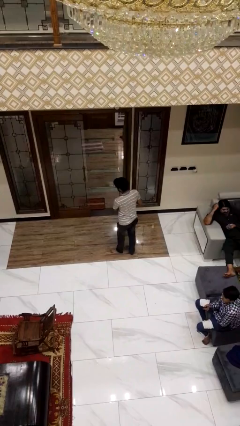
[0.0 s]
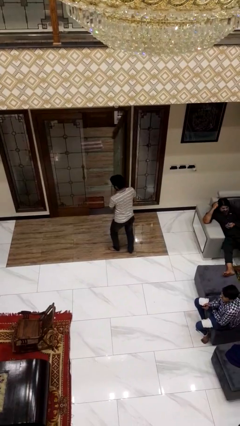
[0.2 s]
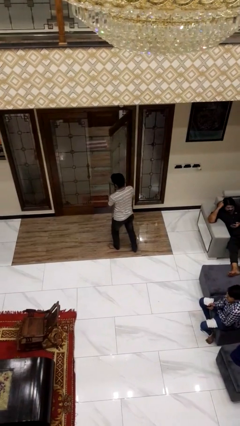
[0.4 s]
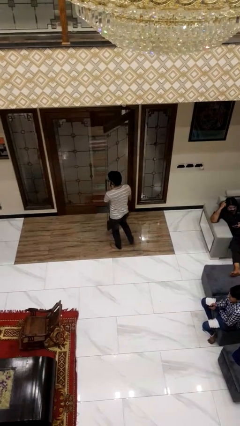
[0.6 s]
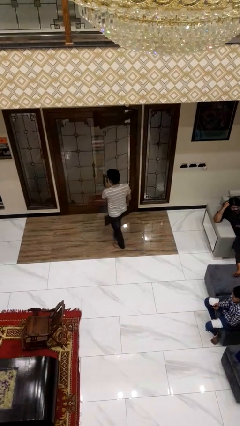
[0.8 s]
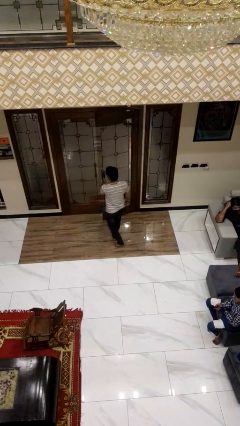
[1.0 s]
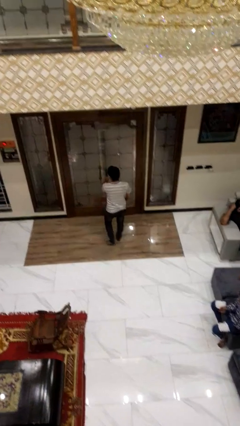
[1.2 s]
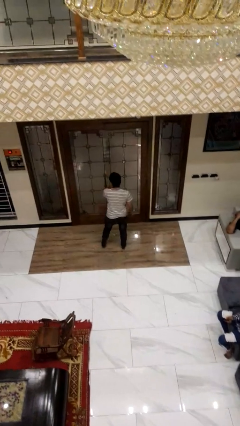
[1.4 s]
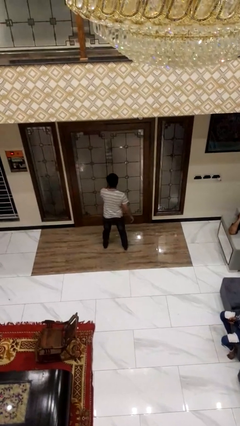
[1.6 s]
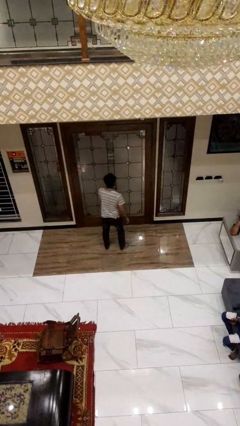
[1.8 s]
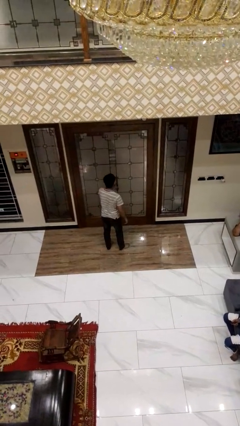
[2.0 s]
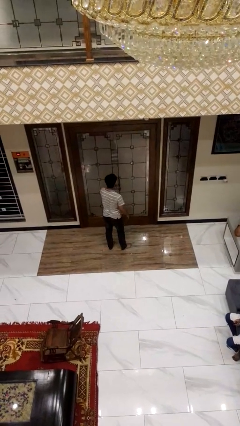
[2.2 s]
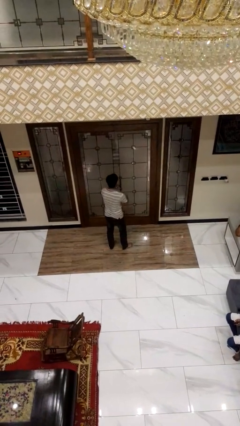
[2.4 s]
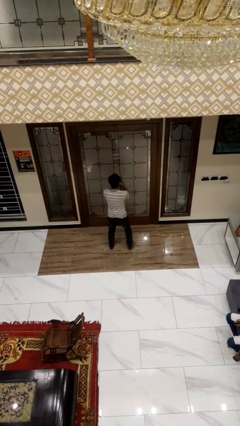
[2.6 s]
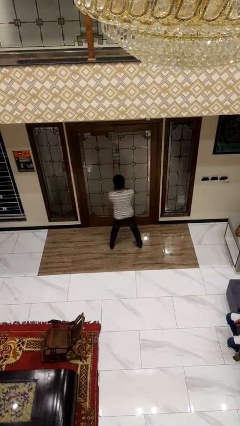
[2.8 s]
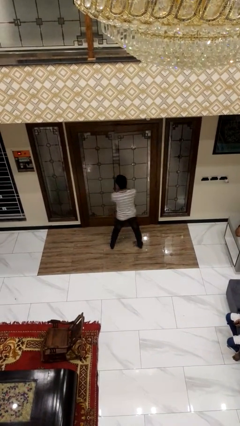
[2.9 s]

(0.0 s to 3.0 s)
person closes facility door

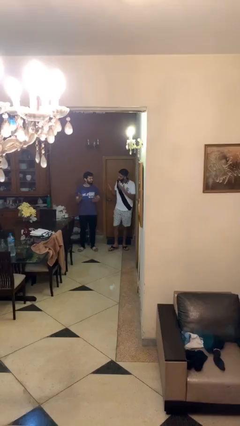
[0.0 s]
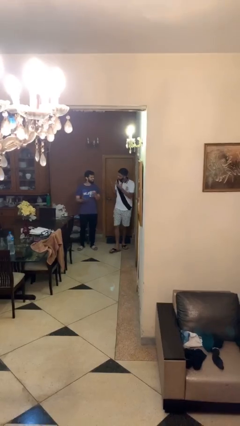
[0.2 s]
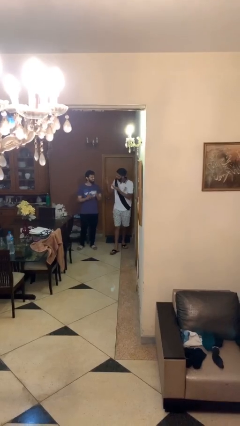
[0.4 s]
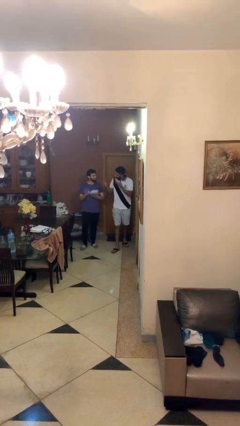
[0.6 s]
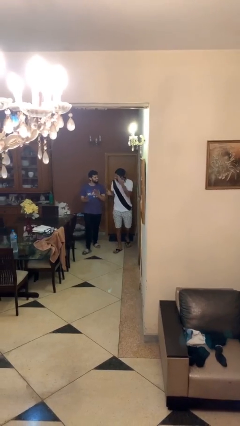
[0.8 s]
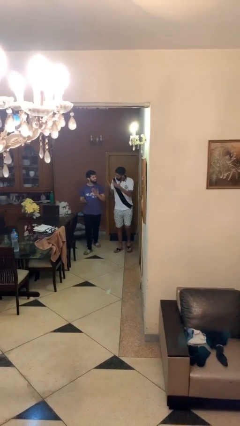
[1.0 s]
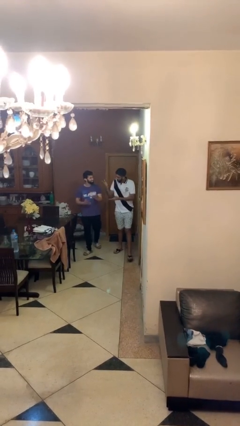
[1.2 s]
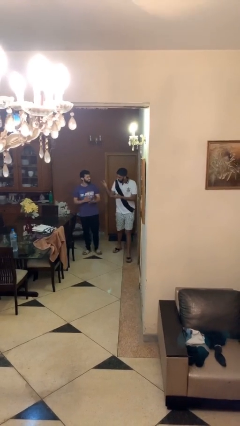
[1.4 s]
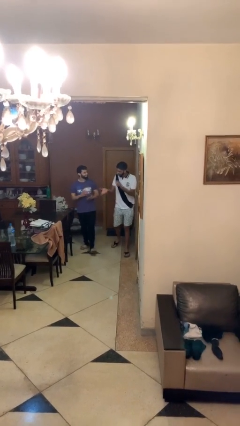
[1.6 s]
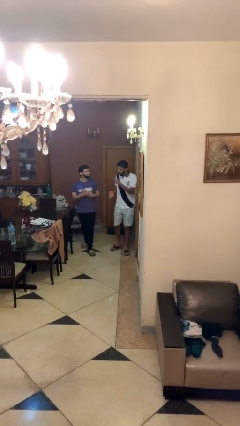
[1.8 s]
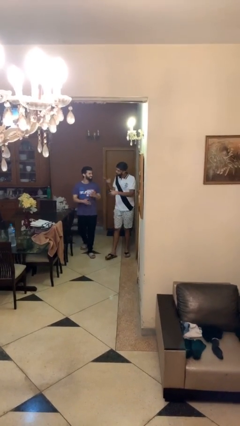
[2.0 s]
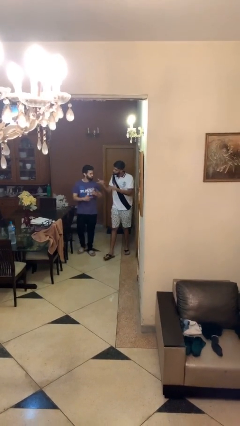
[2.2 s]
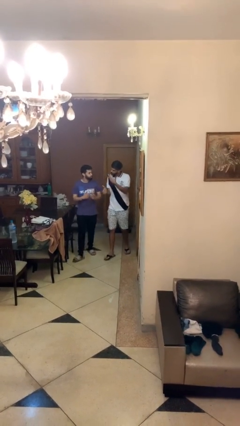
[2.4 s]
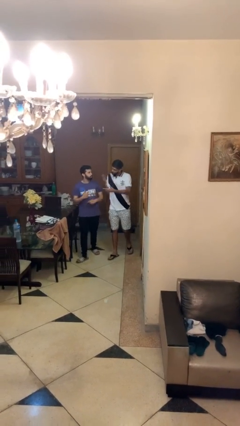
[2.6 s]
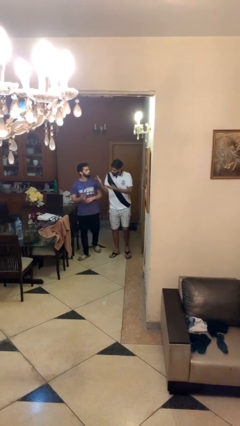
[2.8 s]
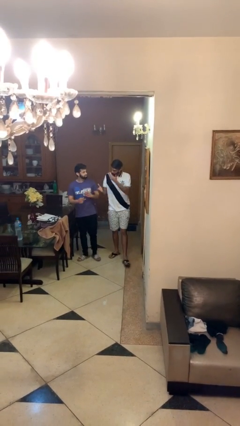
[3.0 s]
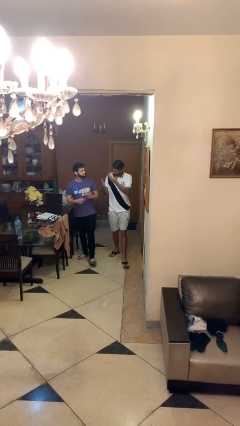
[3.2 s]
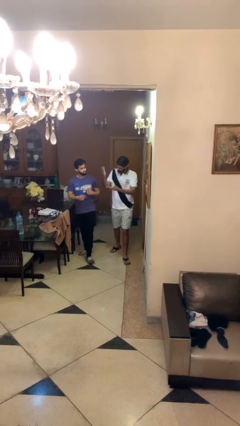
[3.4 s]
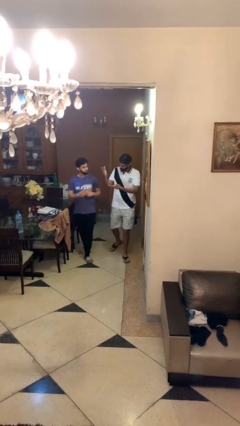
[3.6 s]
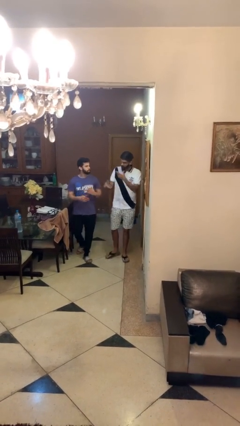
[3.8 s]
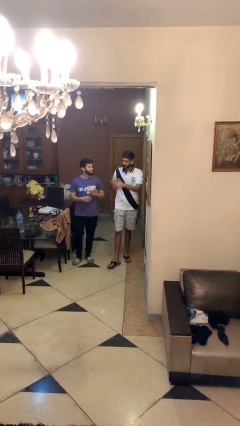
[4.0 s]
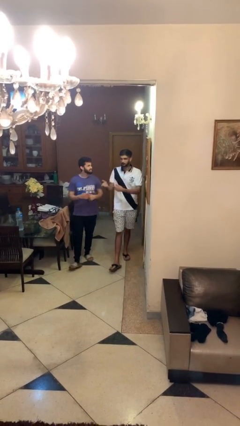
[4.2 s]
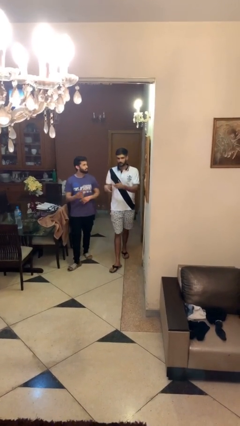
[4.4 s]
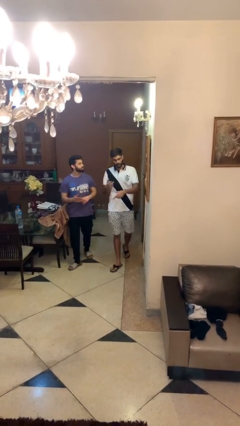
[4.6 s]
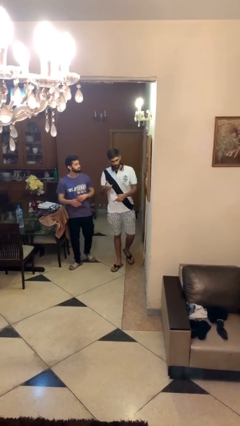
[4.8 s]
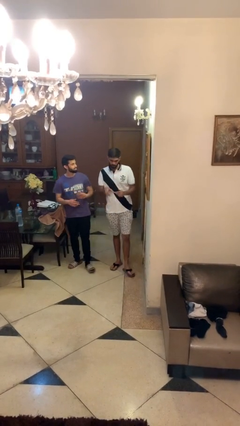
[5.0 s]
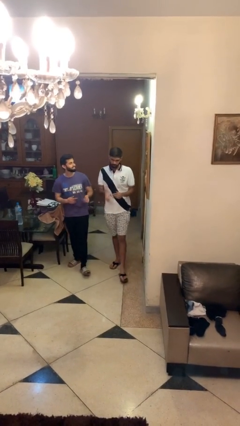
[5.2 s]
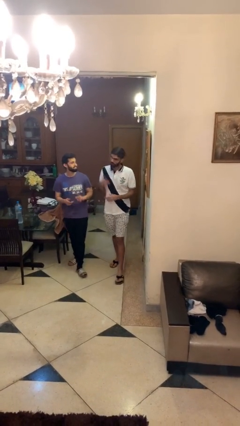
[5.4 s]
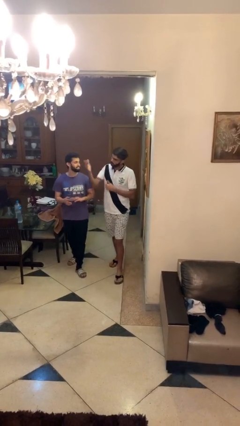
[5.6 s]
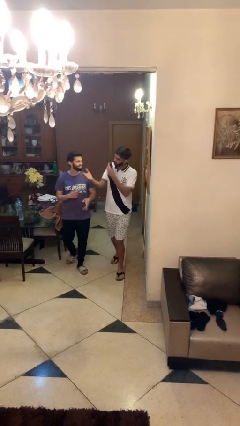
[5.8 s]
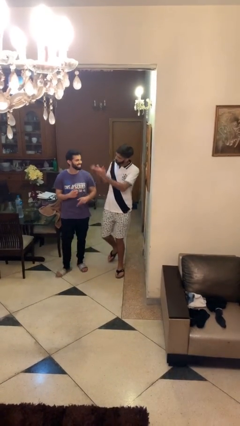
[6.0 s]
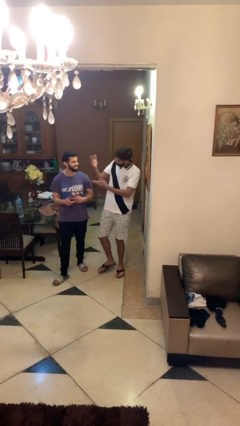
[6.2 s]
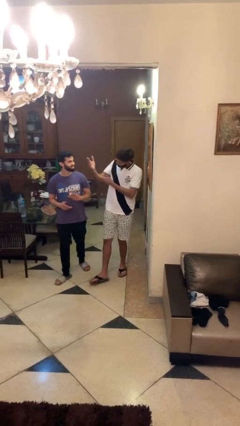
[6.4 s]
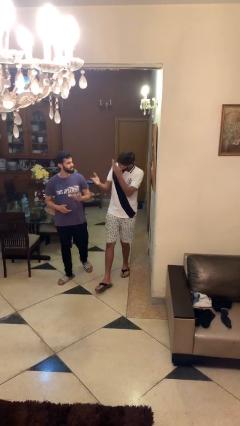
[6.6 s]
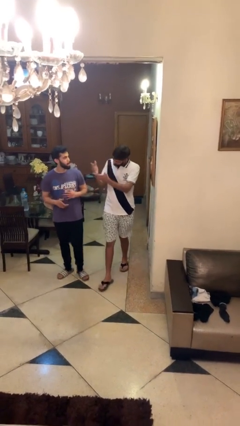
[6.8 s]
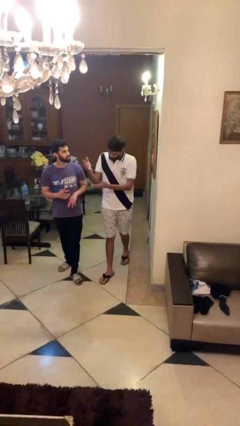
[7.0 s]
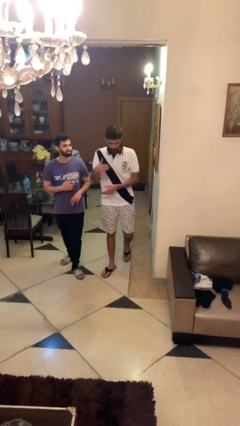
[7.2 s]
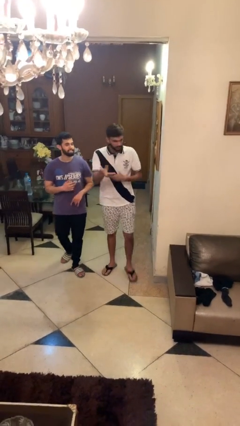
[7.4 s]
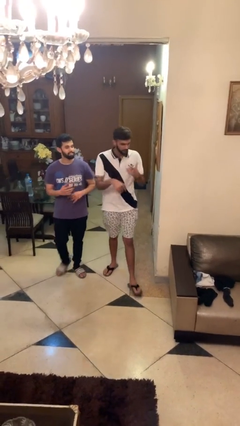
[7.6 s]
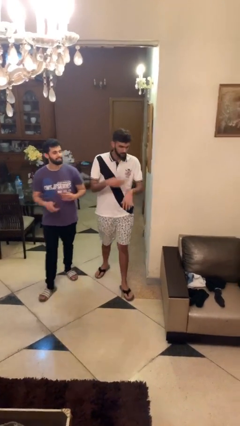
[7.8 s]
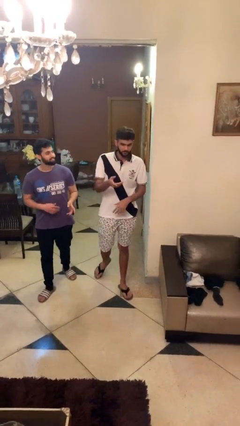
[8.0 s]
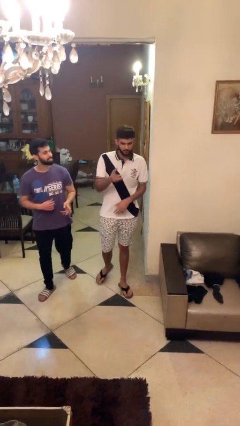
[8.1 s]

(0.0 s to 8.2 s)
person talks to person

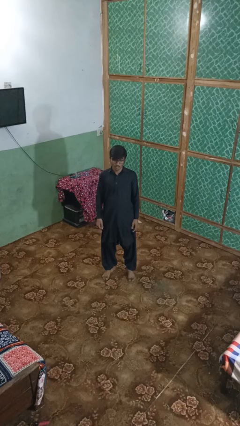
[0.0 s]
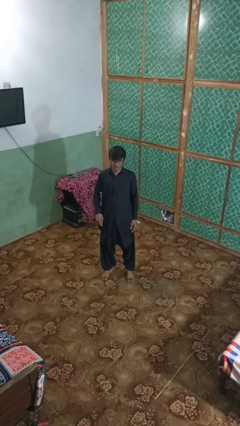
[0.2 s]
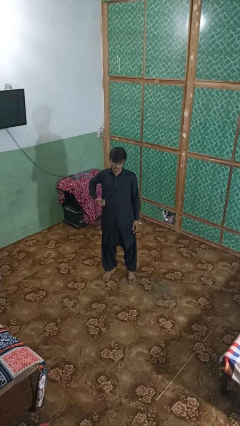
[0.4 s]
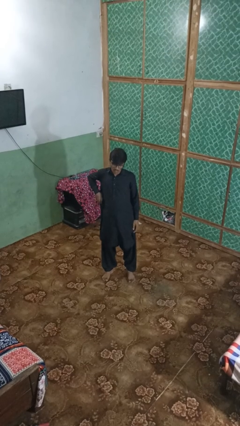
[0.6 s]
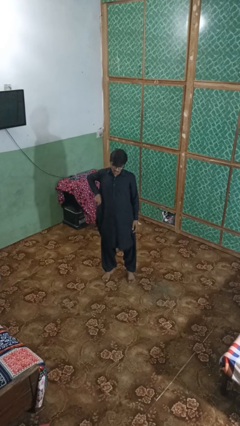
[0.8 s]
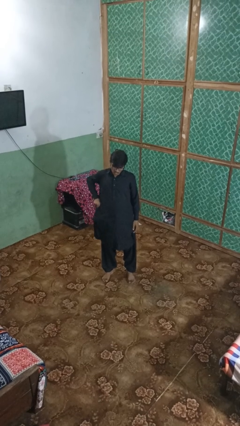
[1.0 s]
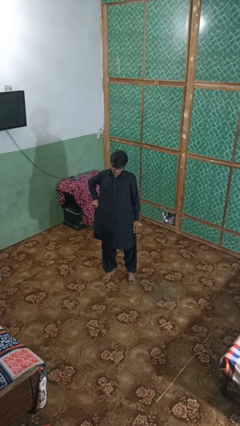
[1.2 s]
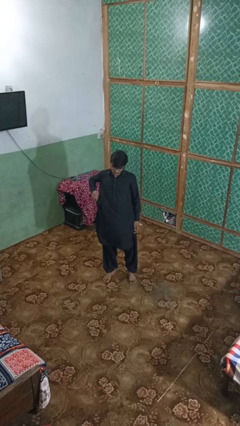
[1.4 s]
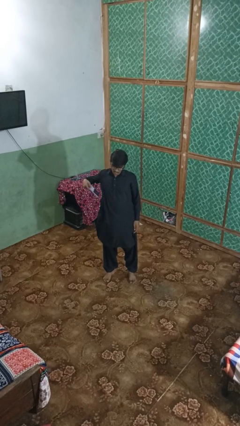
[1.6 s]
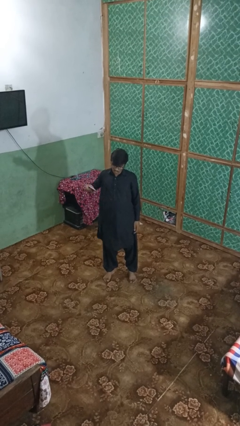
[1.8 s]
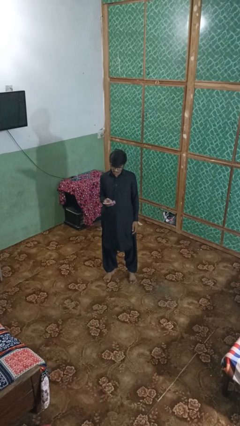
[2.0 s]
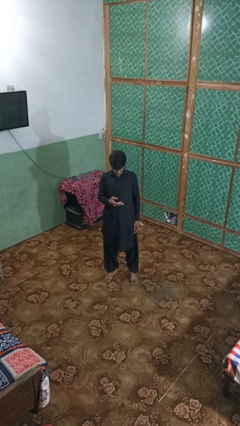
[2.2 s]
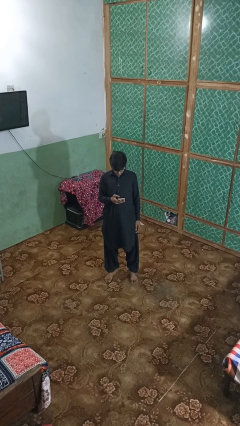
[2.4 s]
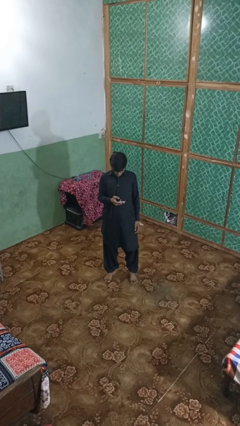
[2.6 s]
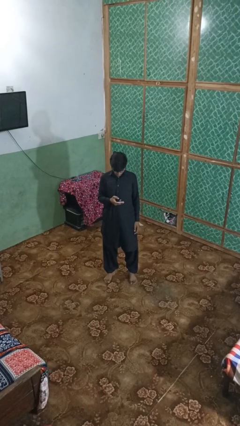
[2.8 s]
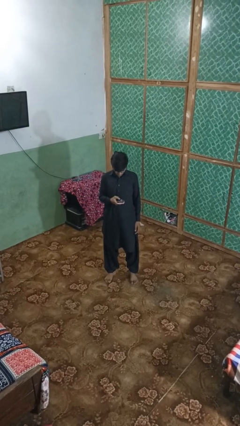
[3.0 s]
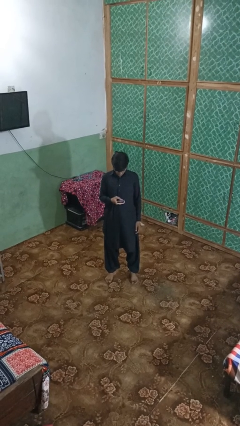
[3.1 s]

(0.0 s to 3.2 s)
person takes phone from pocket

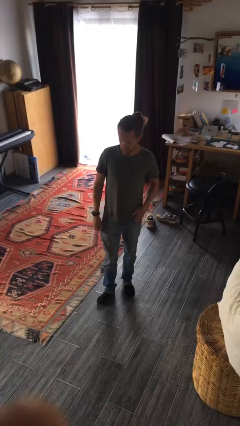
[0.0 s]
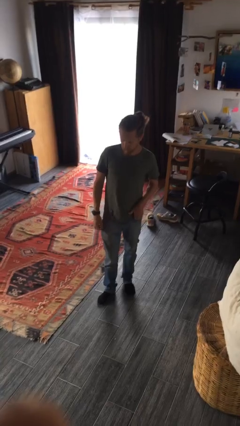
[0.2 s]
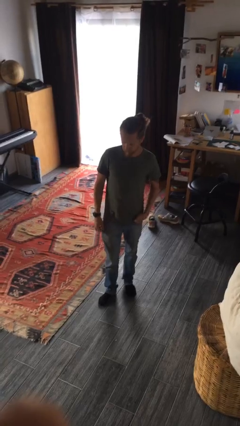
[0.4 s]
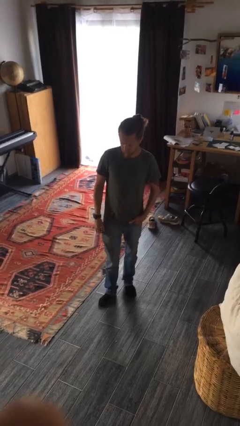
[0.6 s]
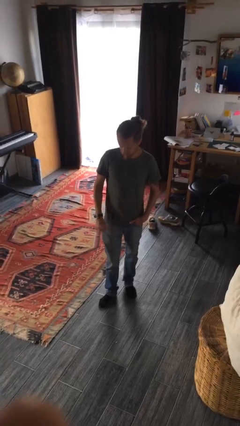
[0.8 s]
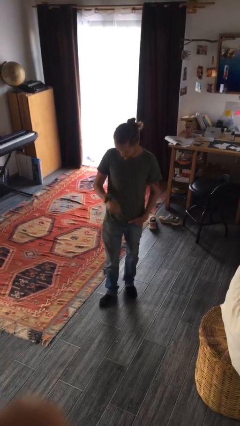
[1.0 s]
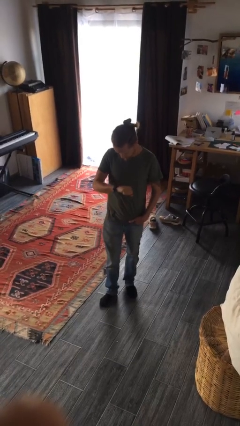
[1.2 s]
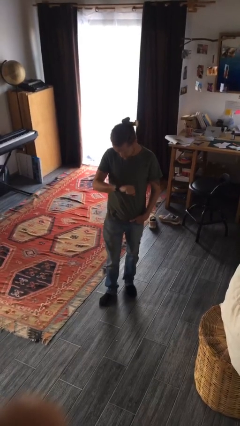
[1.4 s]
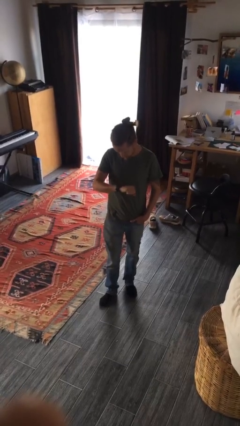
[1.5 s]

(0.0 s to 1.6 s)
person looks at wristwatch

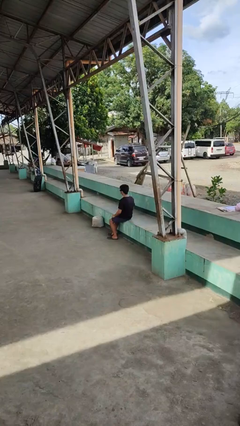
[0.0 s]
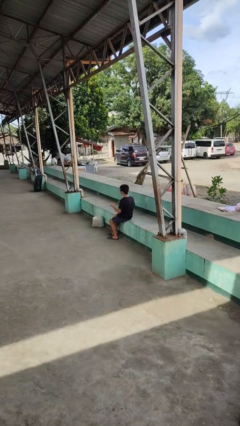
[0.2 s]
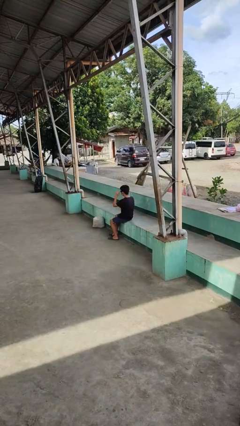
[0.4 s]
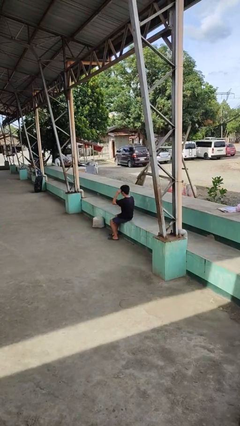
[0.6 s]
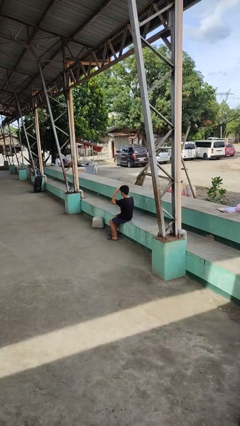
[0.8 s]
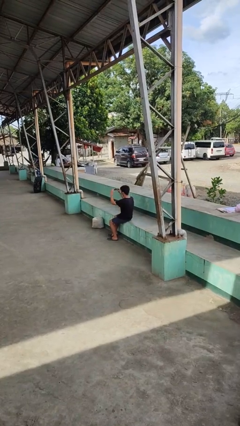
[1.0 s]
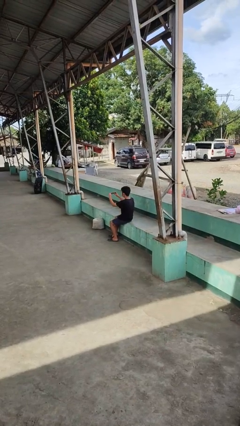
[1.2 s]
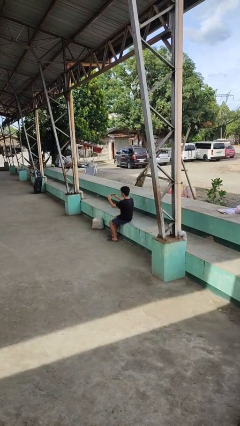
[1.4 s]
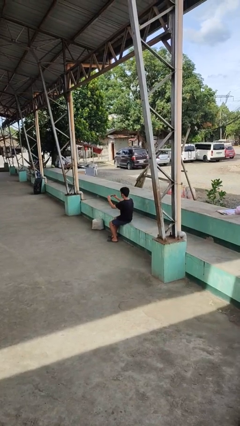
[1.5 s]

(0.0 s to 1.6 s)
person takes off sunglasses

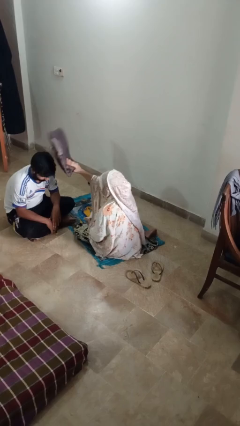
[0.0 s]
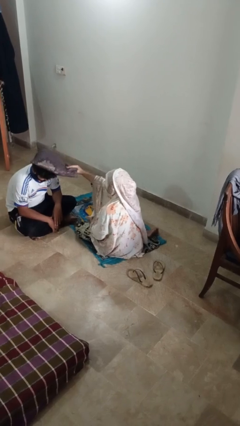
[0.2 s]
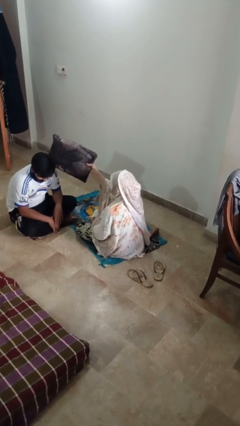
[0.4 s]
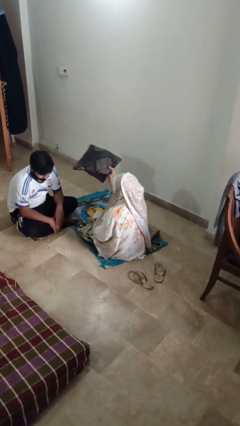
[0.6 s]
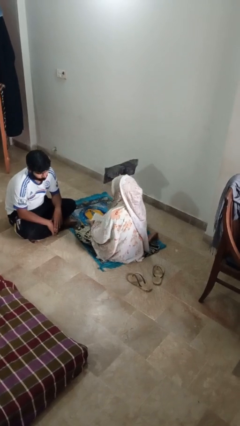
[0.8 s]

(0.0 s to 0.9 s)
person hits person with pillow
